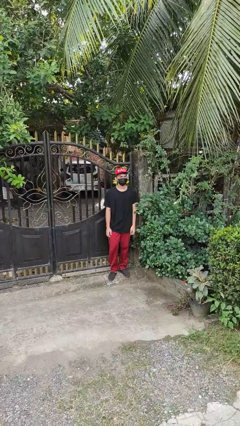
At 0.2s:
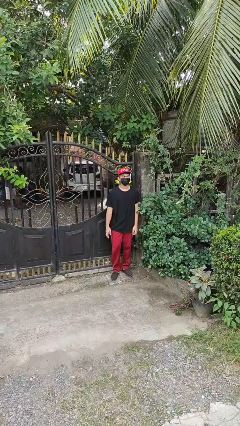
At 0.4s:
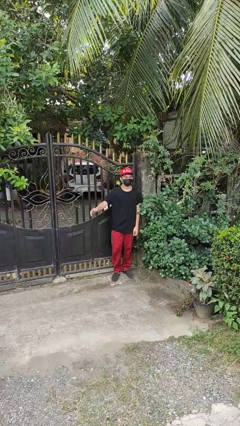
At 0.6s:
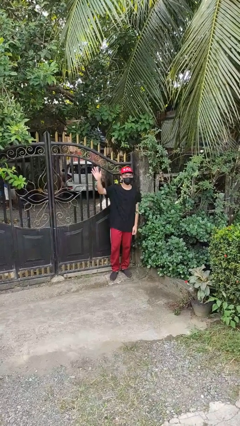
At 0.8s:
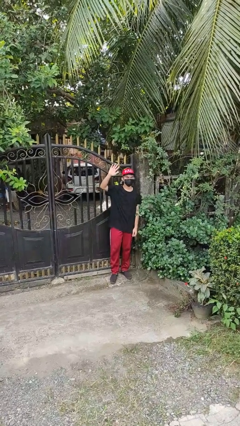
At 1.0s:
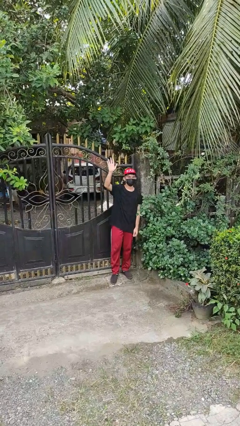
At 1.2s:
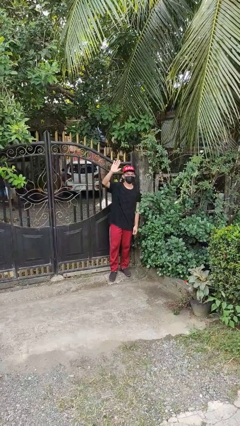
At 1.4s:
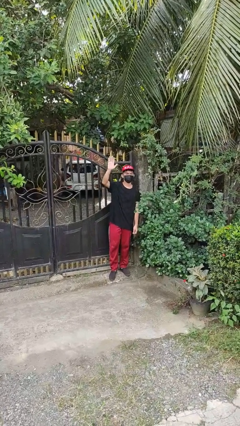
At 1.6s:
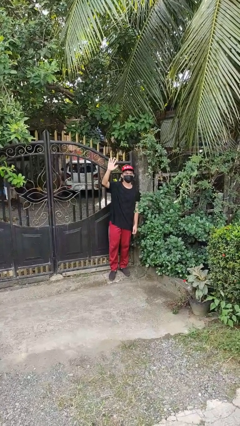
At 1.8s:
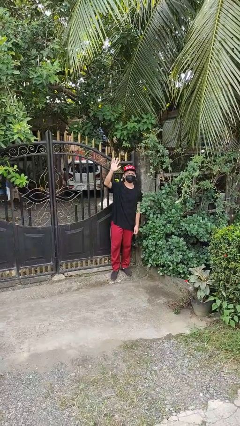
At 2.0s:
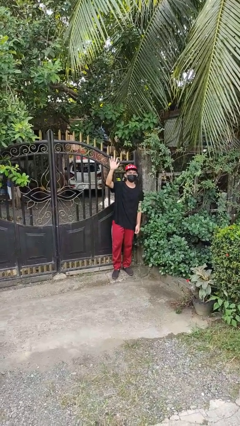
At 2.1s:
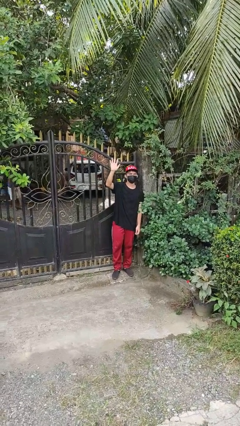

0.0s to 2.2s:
person waves at person

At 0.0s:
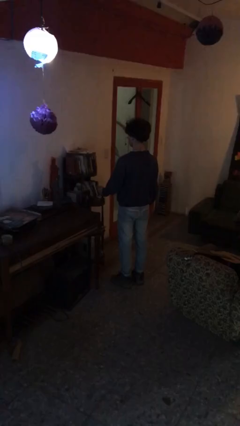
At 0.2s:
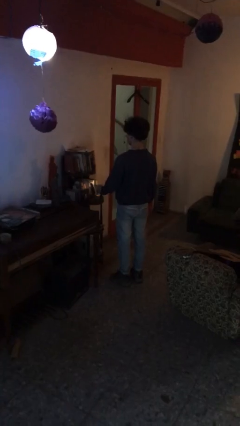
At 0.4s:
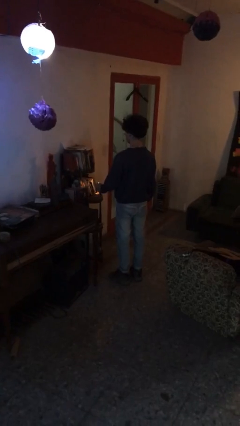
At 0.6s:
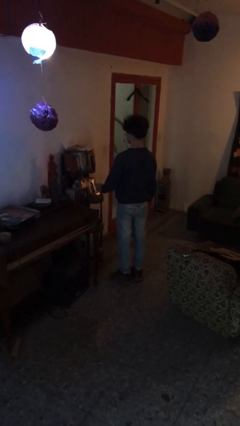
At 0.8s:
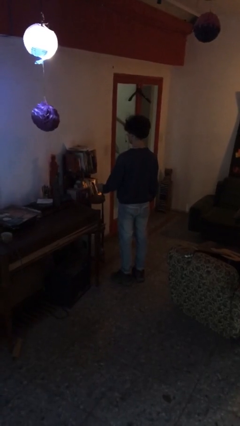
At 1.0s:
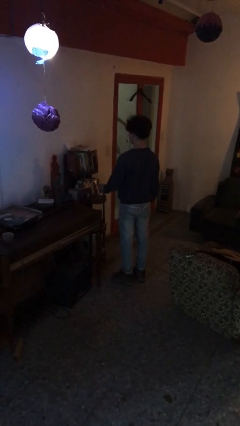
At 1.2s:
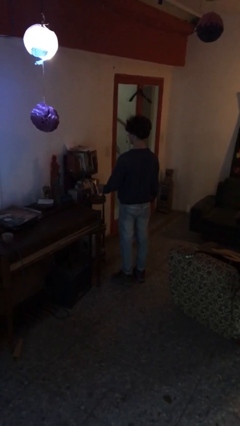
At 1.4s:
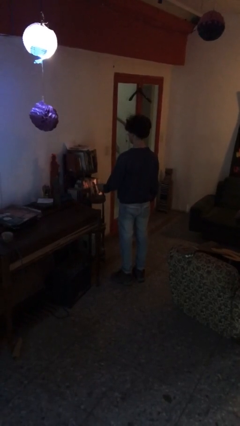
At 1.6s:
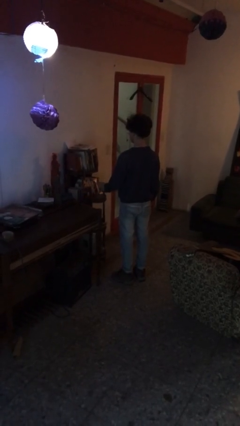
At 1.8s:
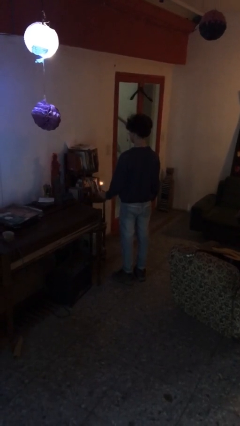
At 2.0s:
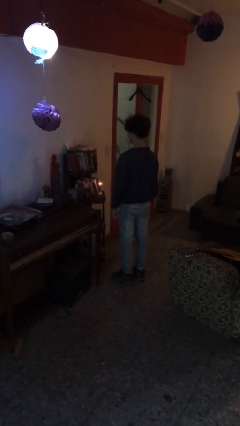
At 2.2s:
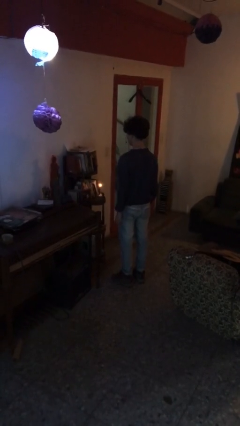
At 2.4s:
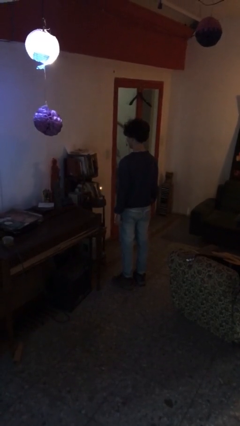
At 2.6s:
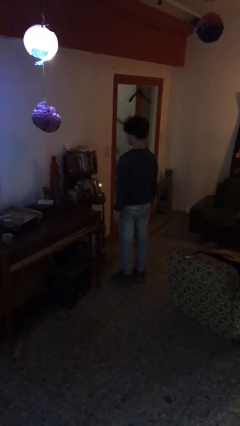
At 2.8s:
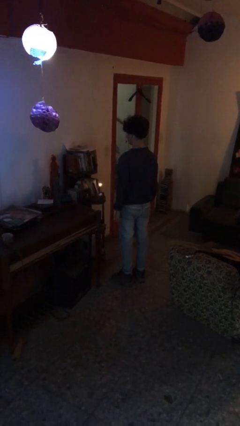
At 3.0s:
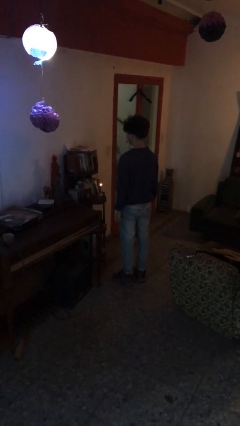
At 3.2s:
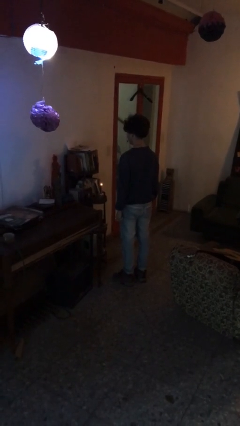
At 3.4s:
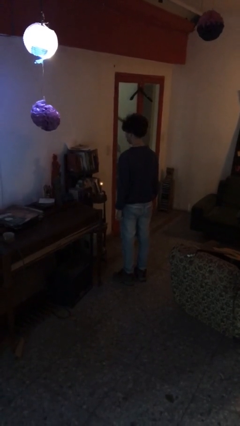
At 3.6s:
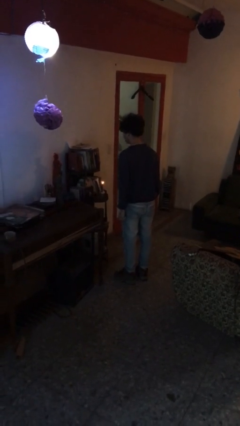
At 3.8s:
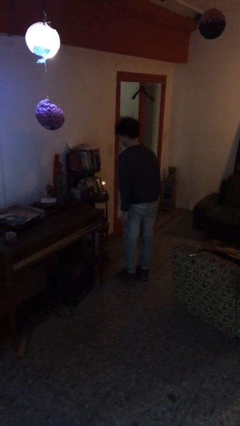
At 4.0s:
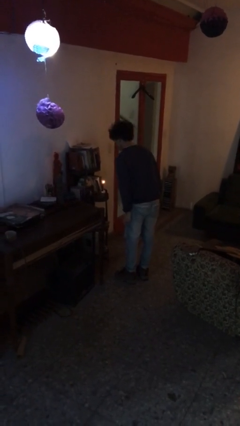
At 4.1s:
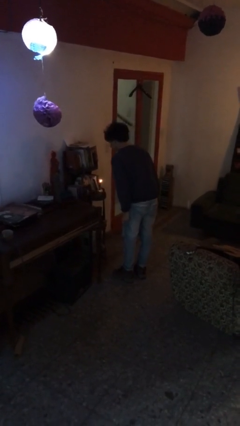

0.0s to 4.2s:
person lights candle

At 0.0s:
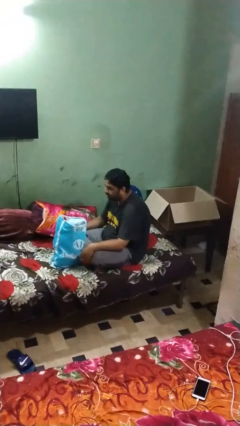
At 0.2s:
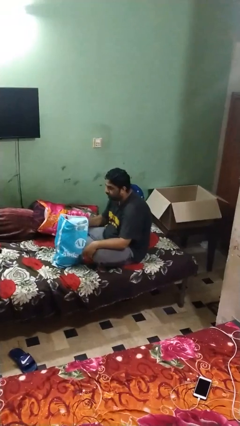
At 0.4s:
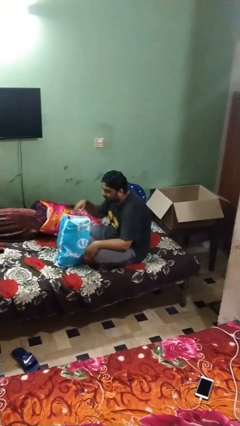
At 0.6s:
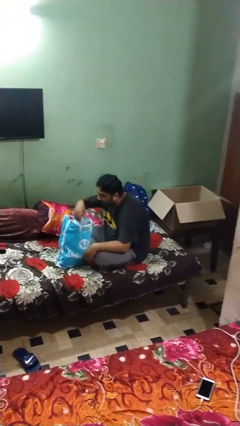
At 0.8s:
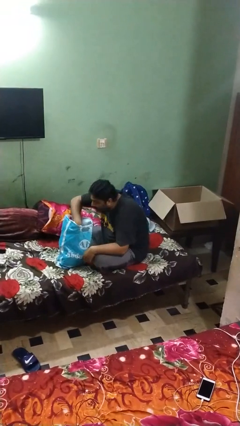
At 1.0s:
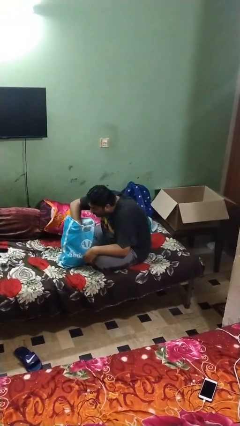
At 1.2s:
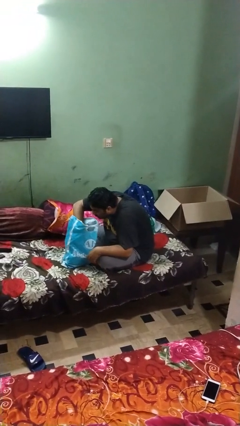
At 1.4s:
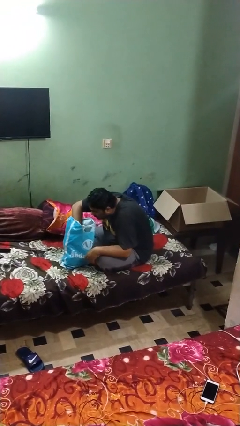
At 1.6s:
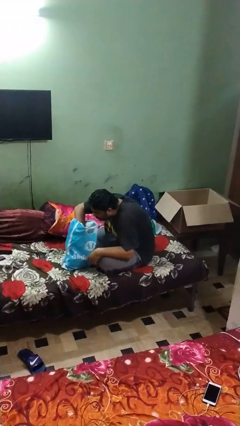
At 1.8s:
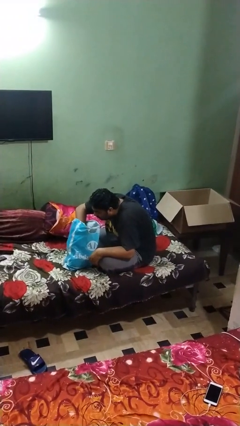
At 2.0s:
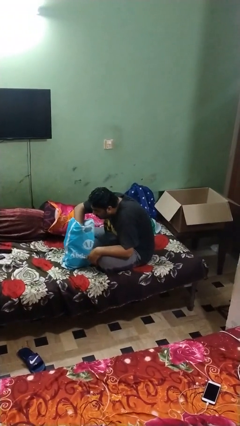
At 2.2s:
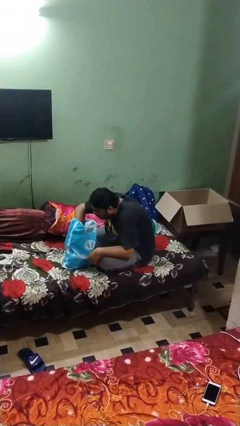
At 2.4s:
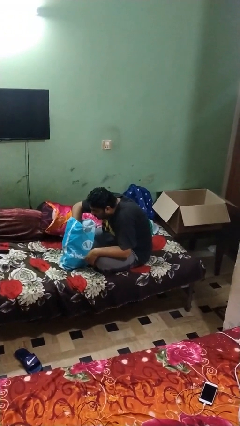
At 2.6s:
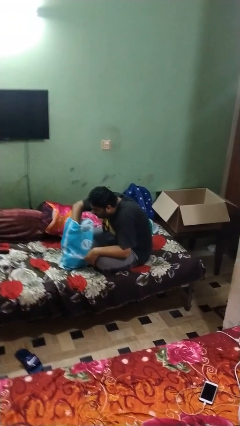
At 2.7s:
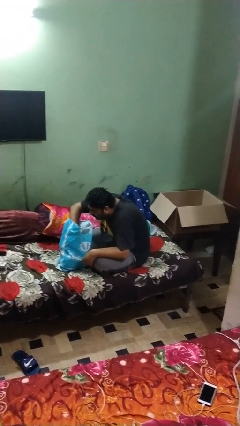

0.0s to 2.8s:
person searches in bag

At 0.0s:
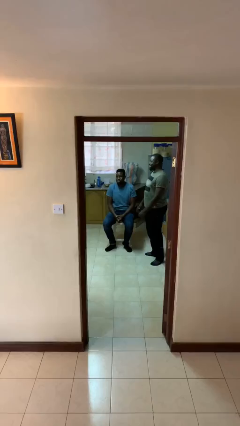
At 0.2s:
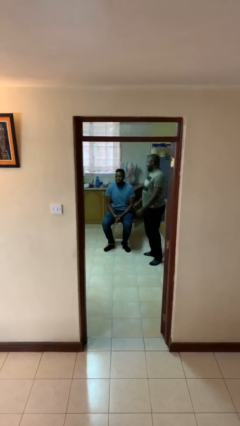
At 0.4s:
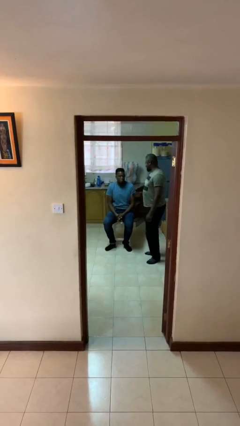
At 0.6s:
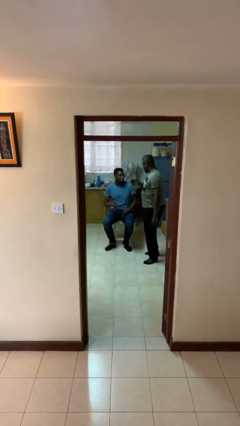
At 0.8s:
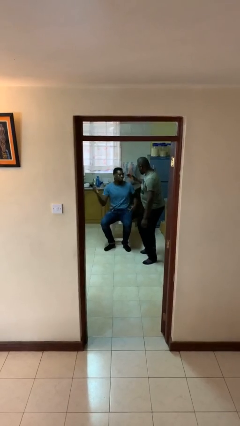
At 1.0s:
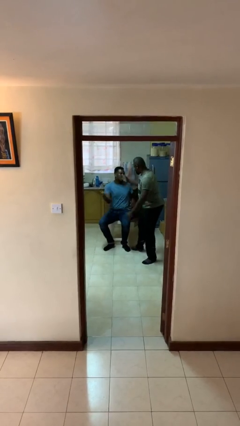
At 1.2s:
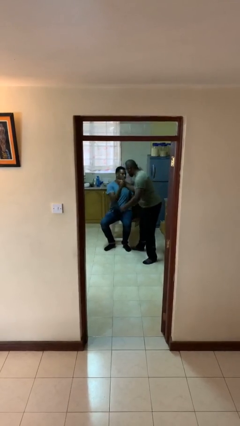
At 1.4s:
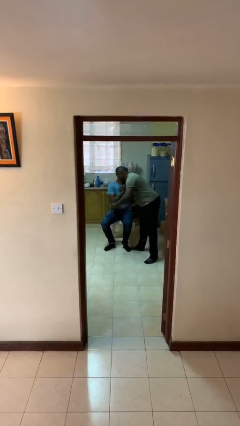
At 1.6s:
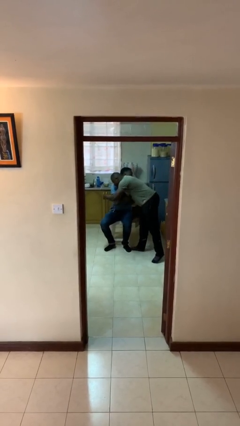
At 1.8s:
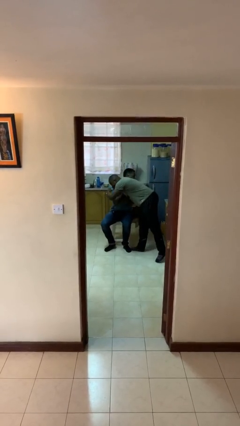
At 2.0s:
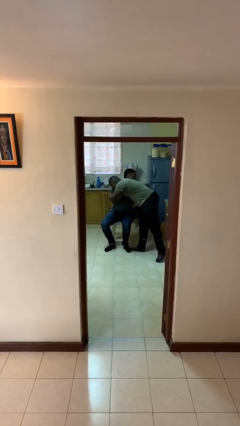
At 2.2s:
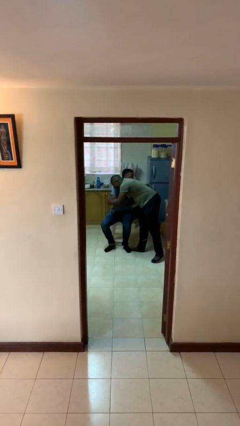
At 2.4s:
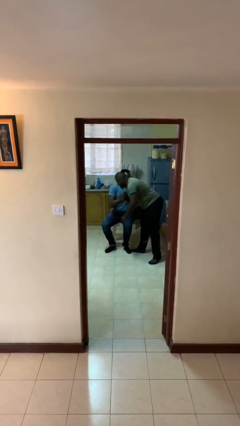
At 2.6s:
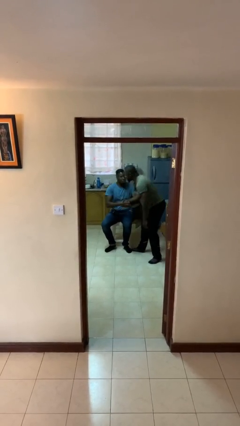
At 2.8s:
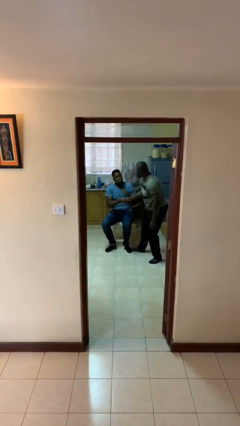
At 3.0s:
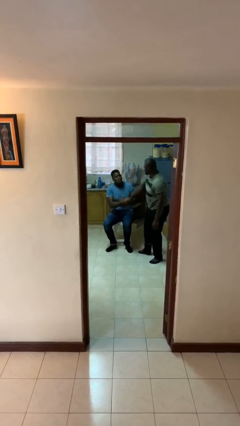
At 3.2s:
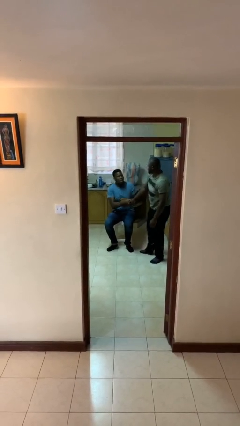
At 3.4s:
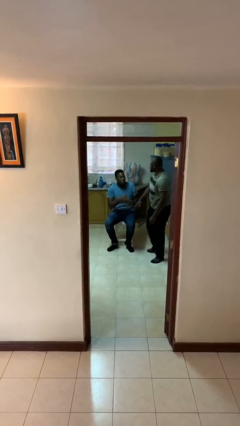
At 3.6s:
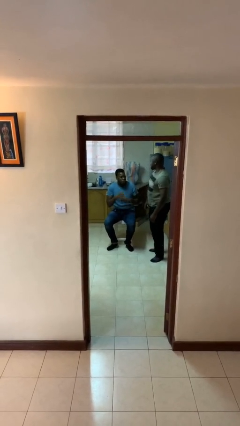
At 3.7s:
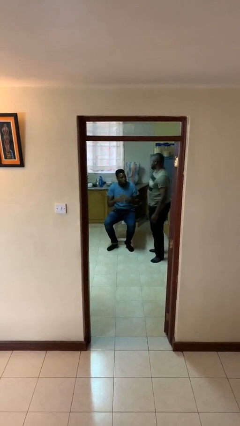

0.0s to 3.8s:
person embraces person

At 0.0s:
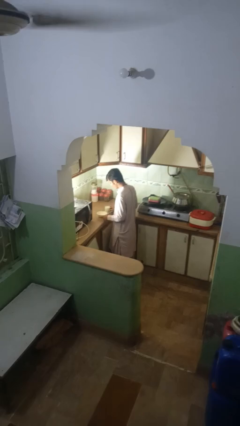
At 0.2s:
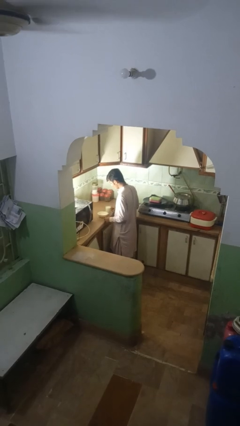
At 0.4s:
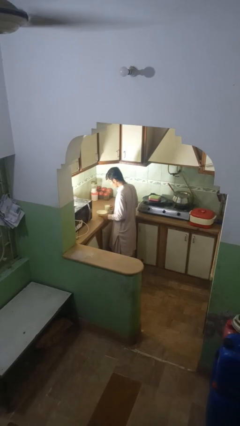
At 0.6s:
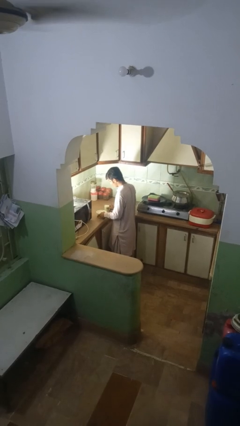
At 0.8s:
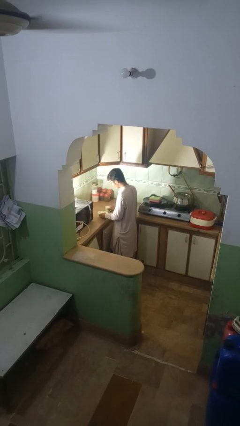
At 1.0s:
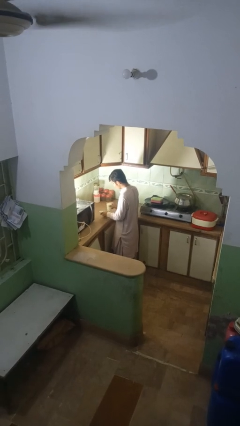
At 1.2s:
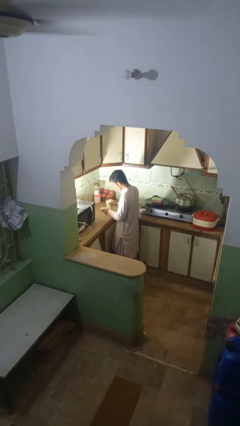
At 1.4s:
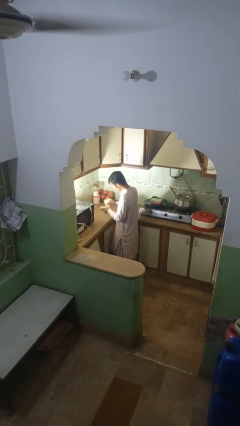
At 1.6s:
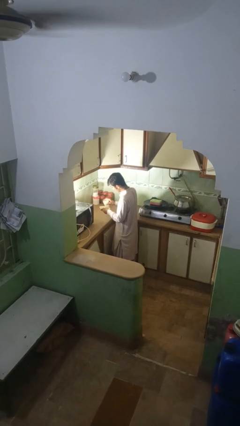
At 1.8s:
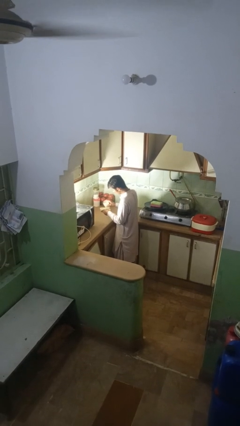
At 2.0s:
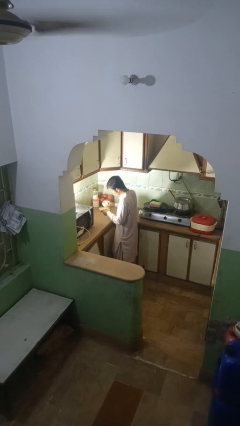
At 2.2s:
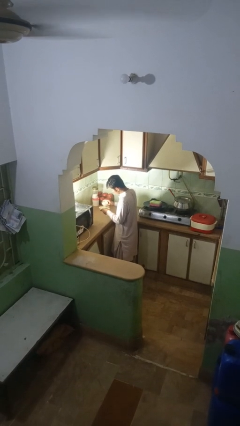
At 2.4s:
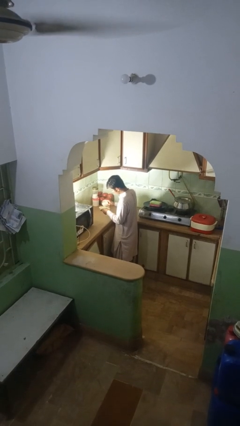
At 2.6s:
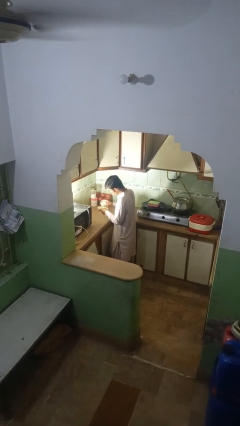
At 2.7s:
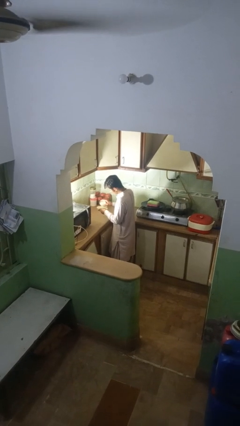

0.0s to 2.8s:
person pours into bowl

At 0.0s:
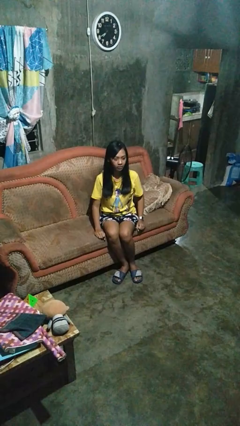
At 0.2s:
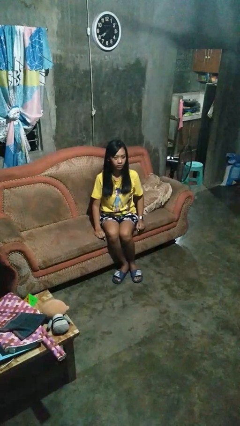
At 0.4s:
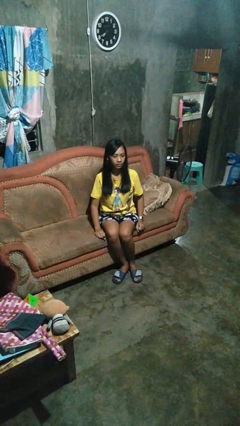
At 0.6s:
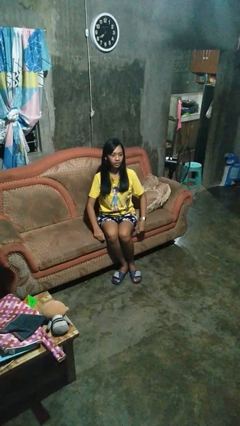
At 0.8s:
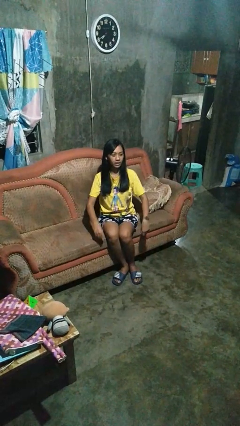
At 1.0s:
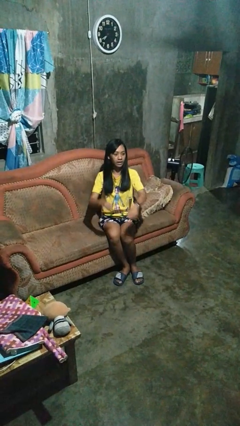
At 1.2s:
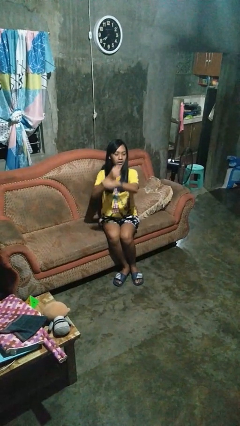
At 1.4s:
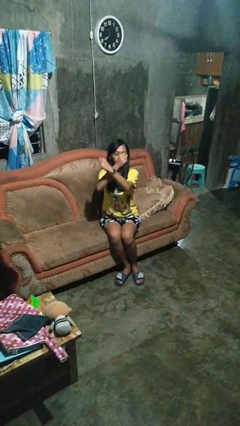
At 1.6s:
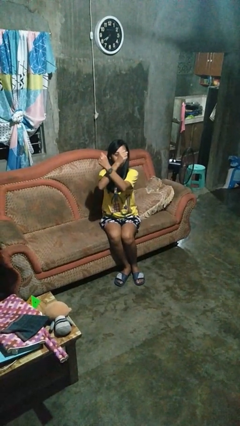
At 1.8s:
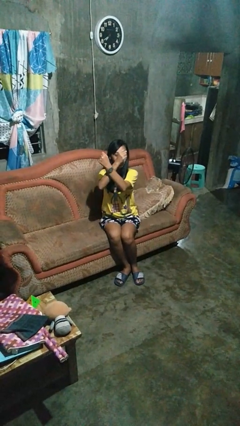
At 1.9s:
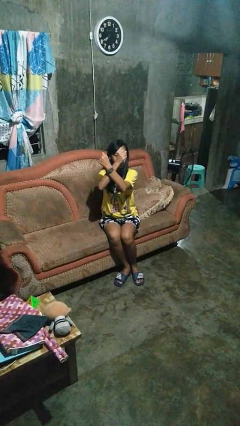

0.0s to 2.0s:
person gestures arms x
